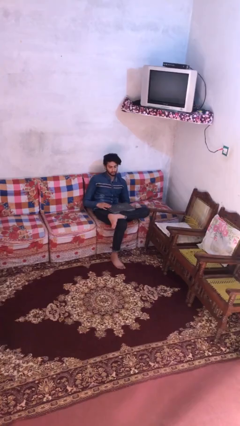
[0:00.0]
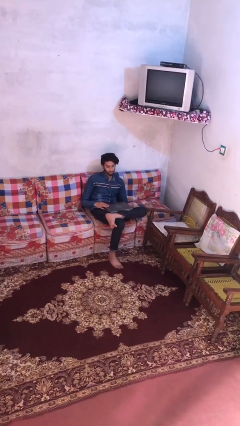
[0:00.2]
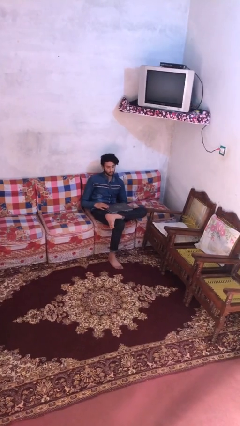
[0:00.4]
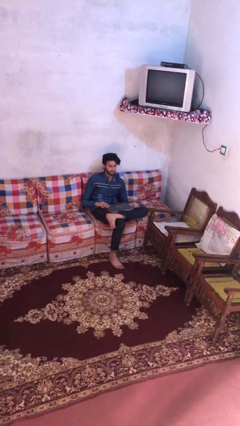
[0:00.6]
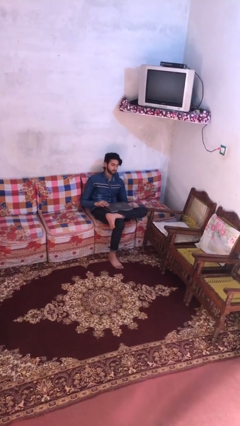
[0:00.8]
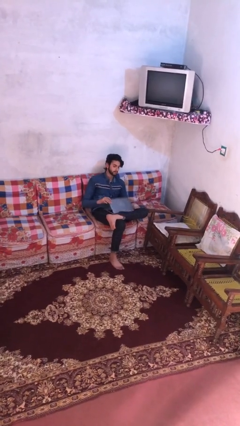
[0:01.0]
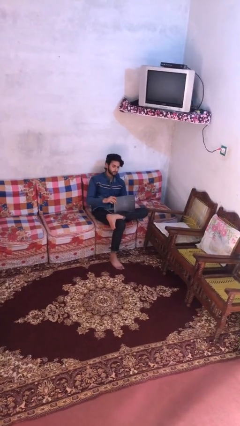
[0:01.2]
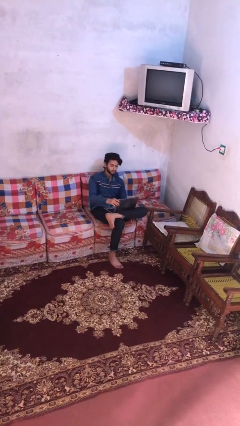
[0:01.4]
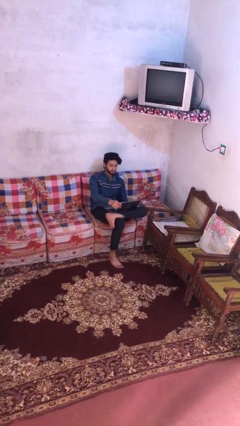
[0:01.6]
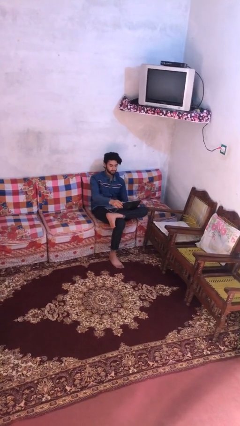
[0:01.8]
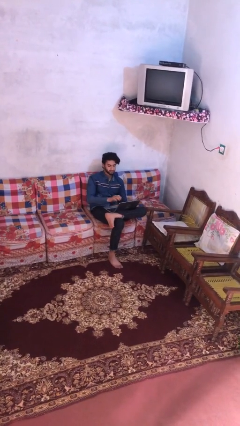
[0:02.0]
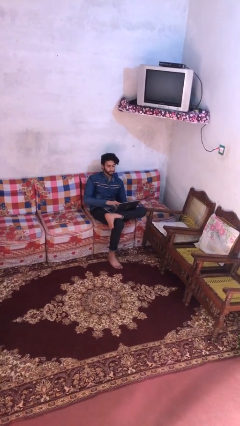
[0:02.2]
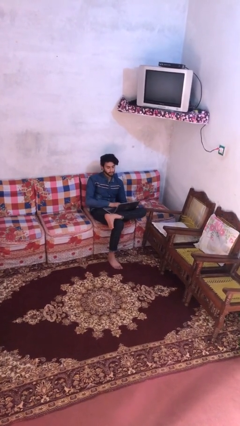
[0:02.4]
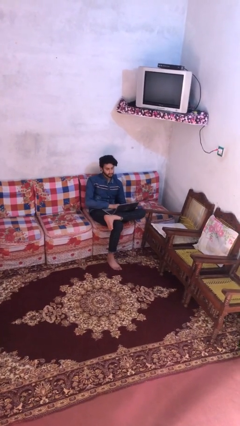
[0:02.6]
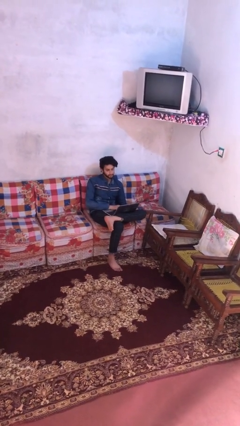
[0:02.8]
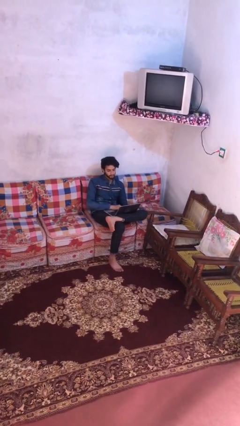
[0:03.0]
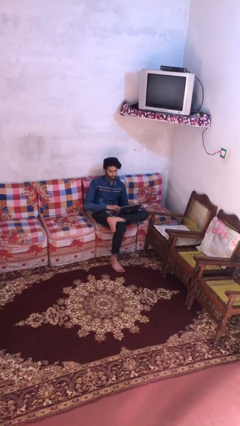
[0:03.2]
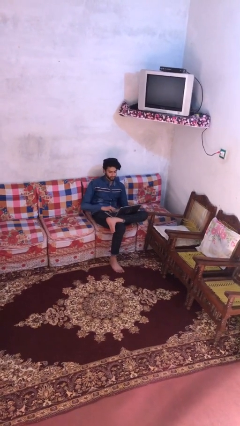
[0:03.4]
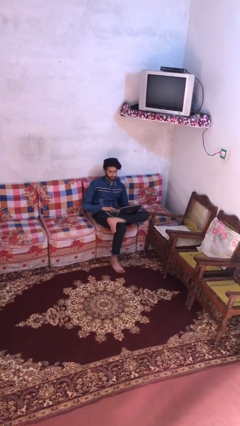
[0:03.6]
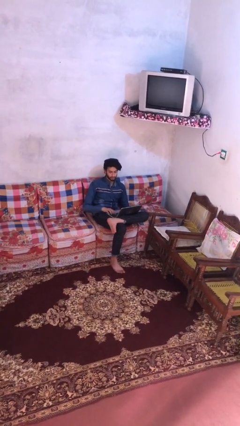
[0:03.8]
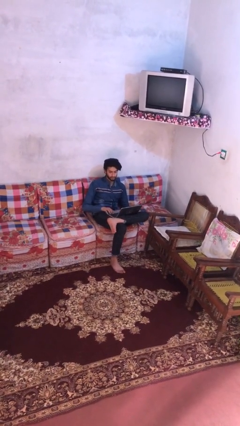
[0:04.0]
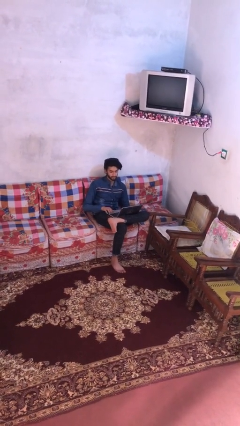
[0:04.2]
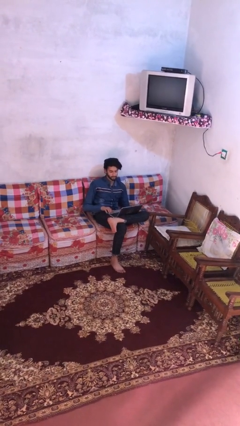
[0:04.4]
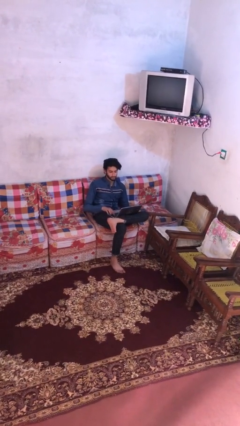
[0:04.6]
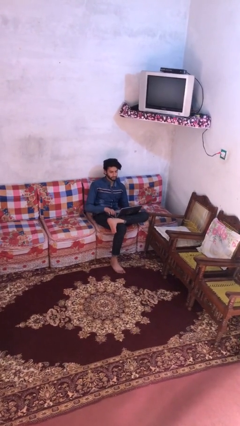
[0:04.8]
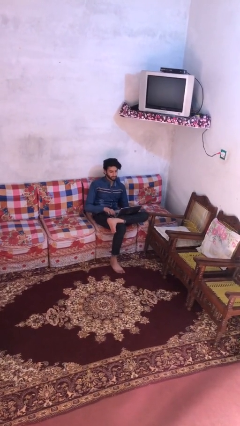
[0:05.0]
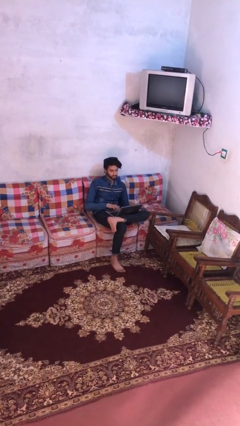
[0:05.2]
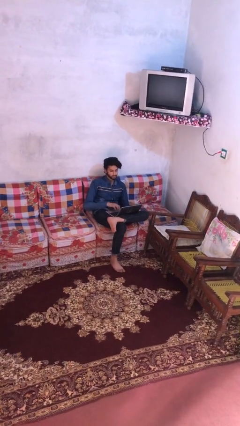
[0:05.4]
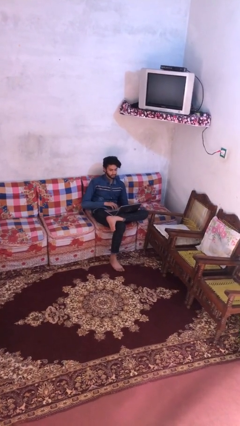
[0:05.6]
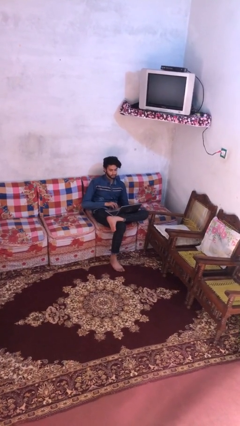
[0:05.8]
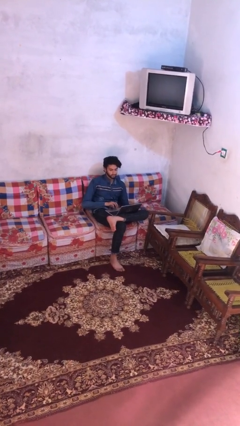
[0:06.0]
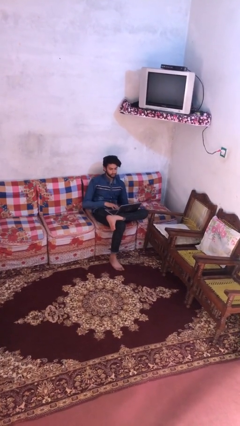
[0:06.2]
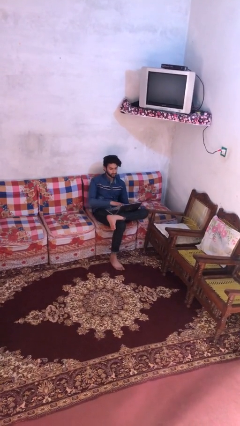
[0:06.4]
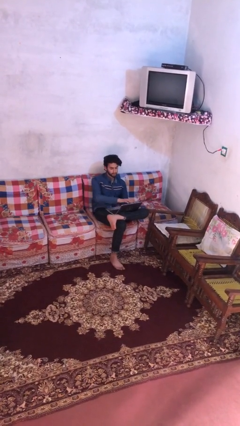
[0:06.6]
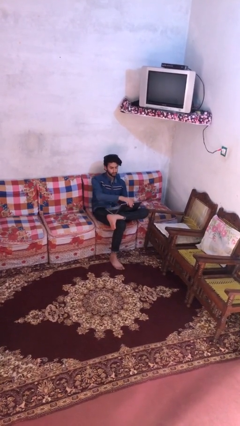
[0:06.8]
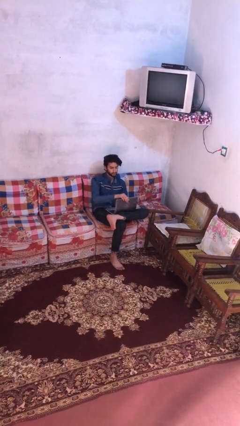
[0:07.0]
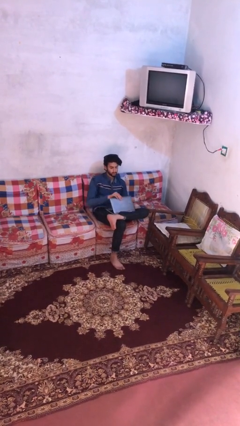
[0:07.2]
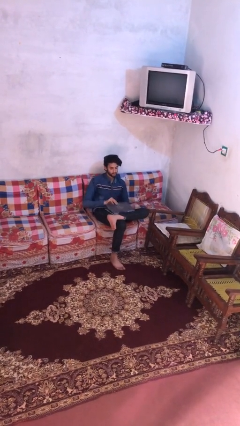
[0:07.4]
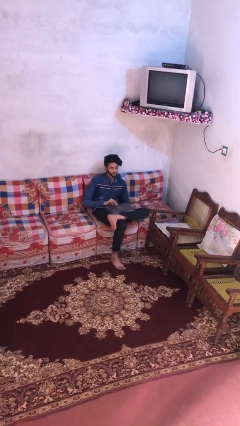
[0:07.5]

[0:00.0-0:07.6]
person interacts with laptop

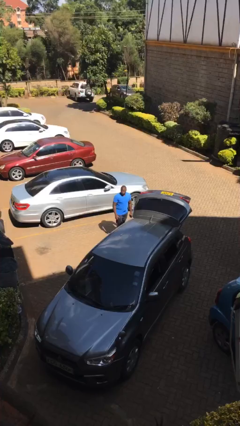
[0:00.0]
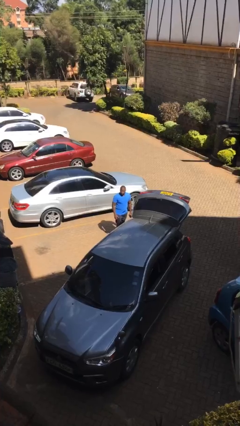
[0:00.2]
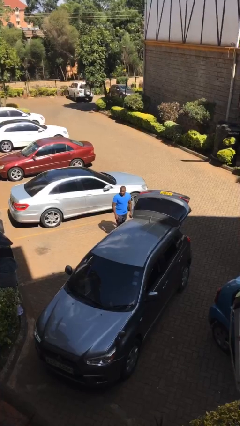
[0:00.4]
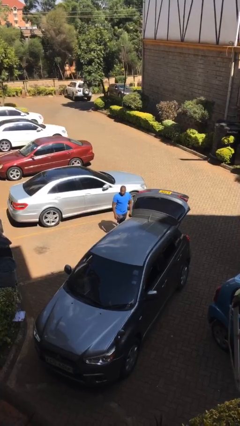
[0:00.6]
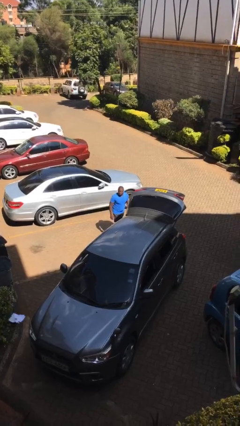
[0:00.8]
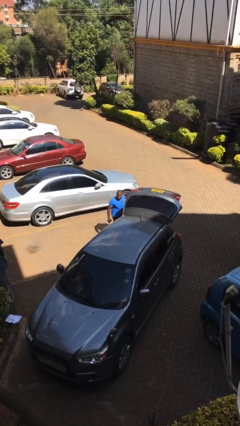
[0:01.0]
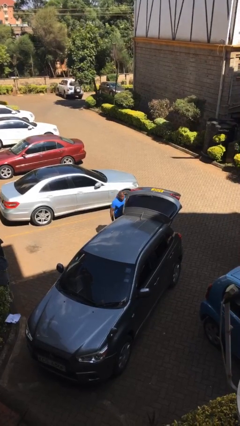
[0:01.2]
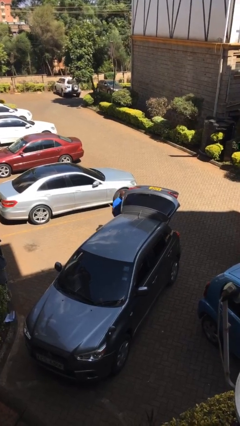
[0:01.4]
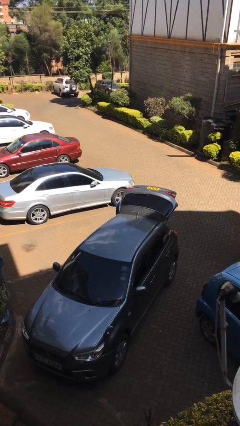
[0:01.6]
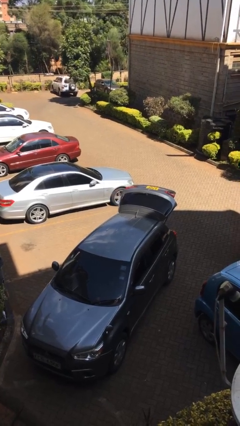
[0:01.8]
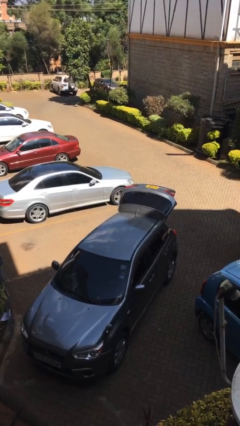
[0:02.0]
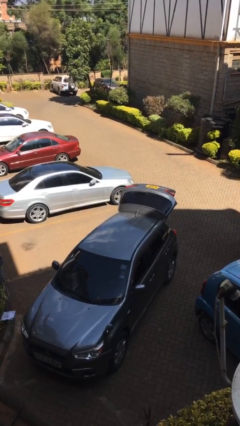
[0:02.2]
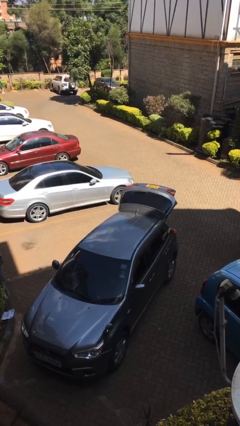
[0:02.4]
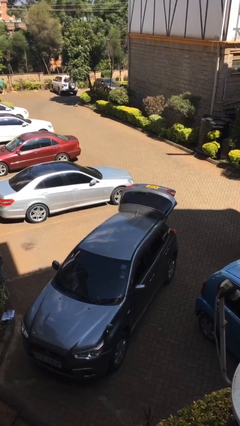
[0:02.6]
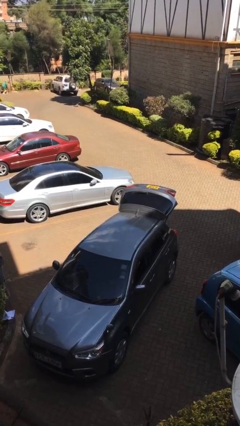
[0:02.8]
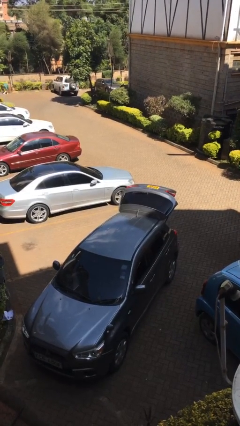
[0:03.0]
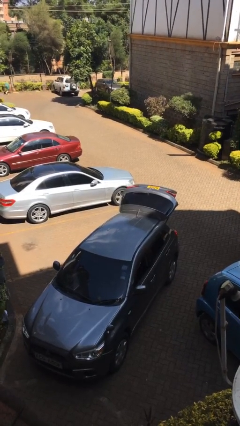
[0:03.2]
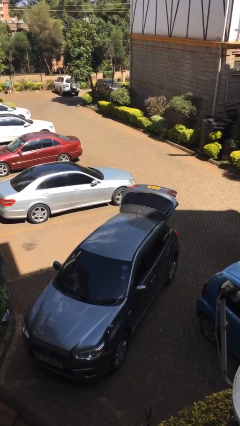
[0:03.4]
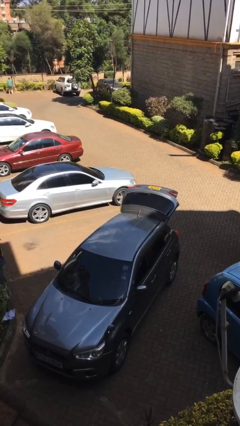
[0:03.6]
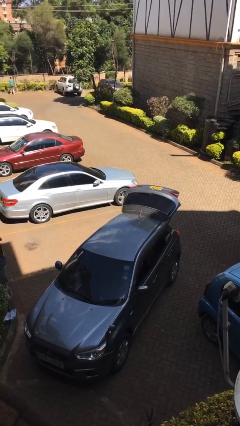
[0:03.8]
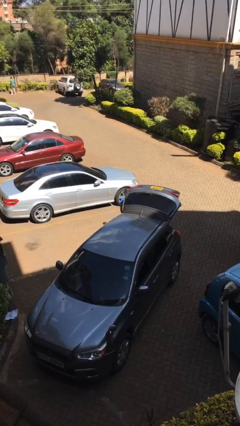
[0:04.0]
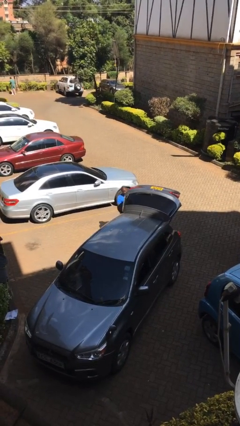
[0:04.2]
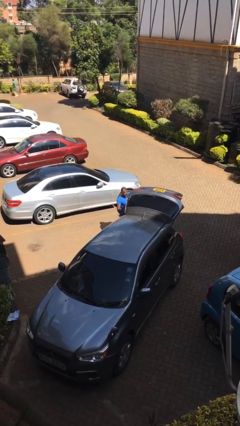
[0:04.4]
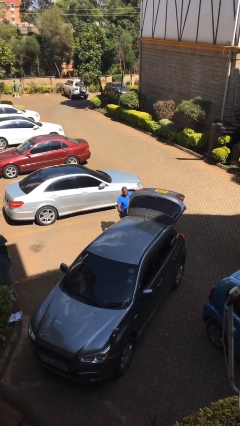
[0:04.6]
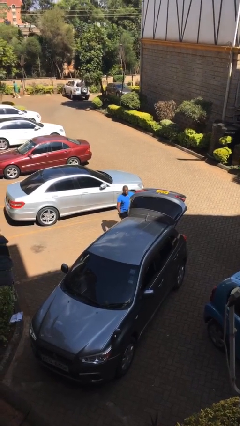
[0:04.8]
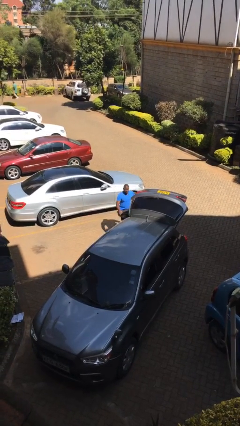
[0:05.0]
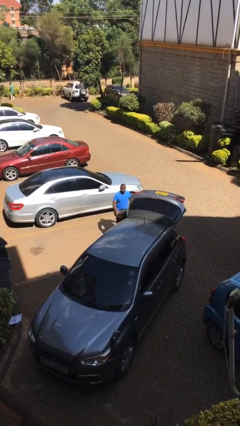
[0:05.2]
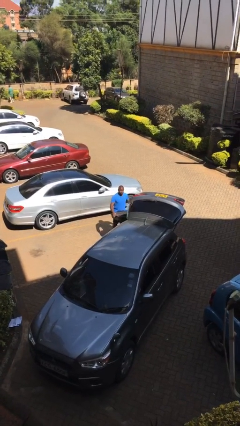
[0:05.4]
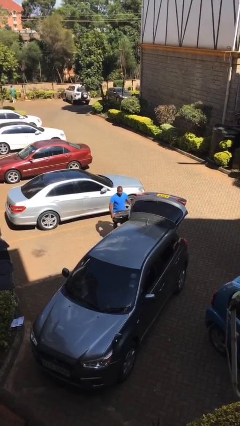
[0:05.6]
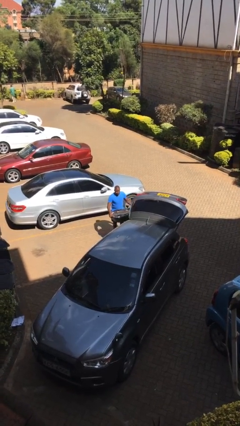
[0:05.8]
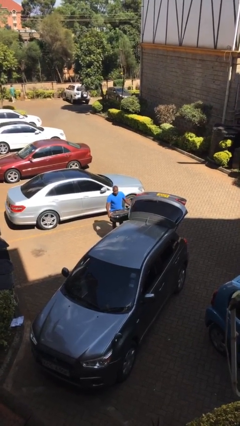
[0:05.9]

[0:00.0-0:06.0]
person unloads car

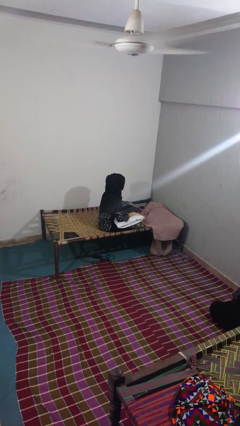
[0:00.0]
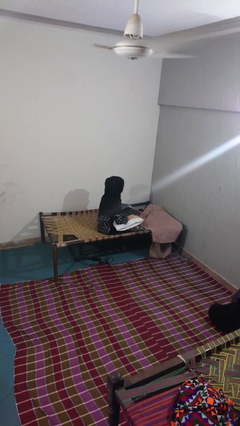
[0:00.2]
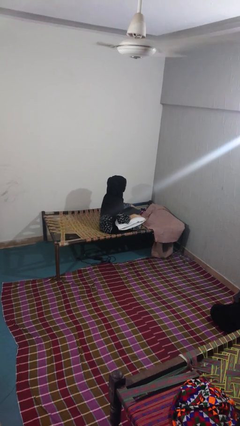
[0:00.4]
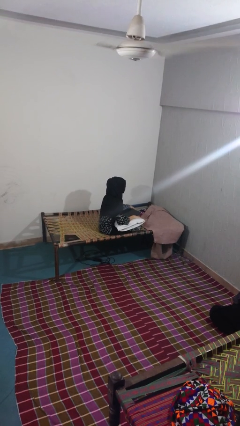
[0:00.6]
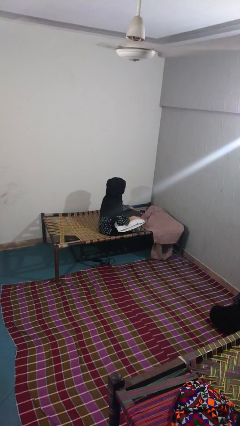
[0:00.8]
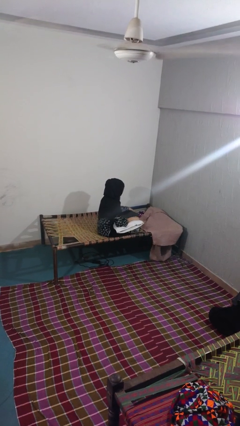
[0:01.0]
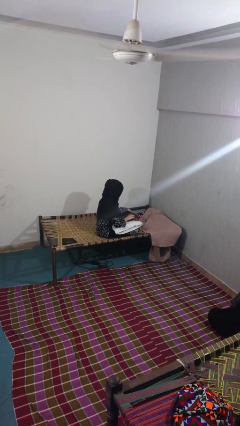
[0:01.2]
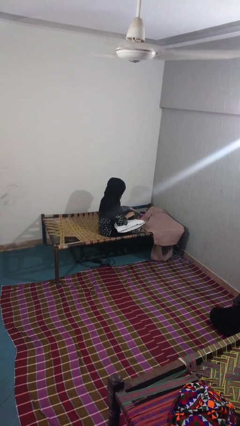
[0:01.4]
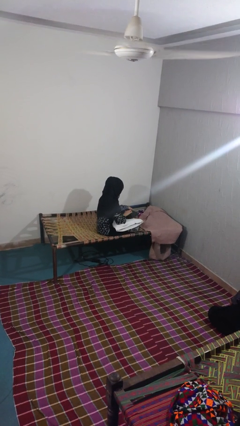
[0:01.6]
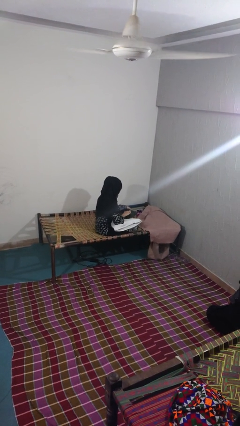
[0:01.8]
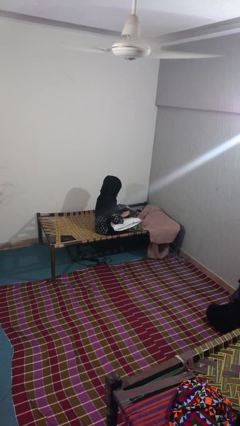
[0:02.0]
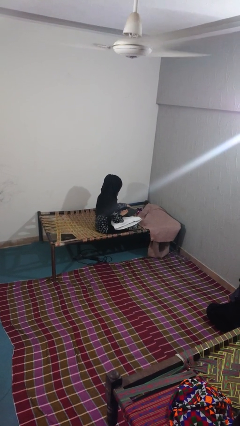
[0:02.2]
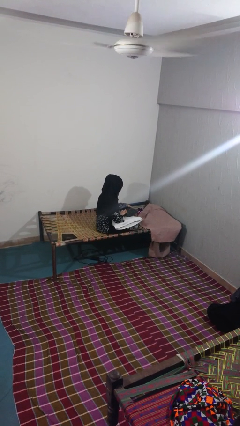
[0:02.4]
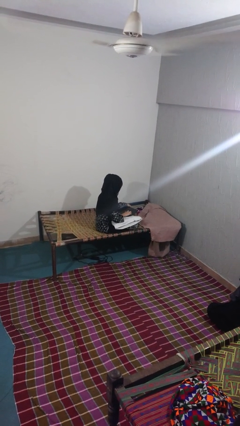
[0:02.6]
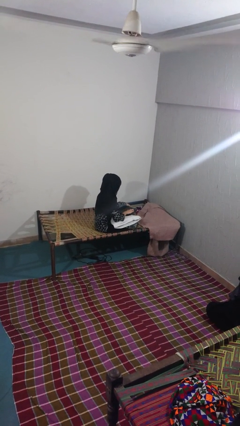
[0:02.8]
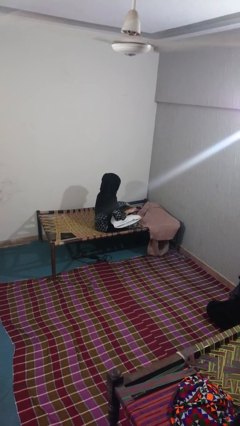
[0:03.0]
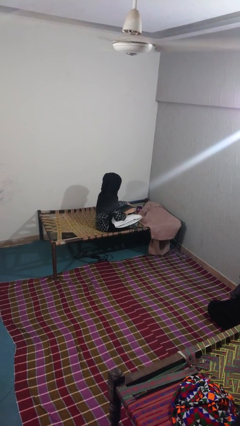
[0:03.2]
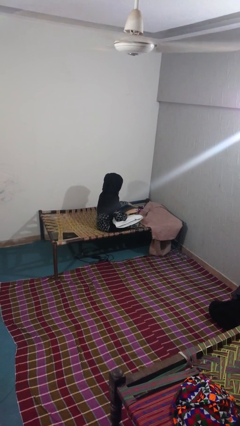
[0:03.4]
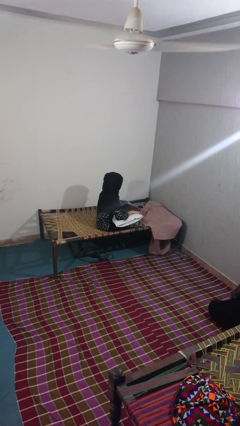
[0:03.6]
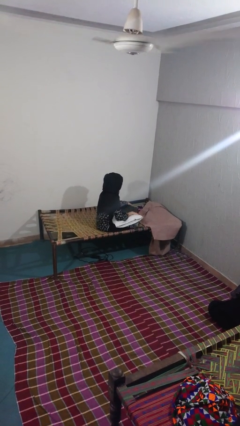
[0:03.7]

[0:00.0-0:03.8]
person interacts with tablet

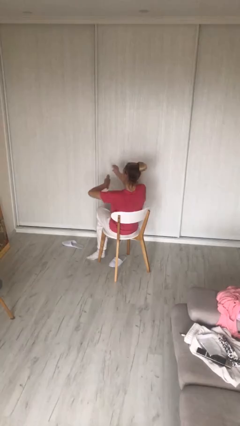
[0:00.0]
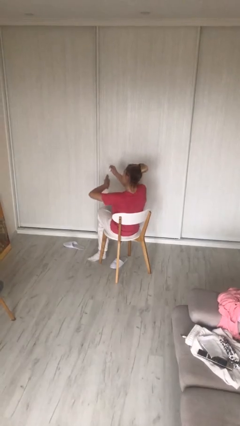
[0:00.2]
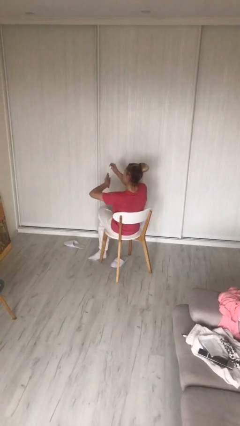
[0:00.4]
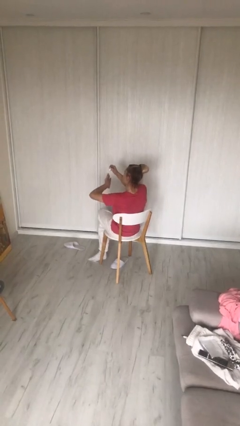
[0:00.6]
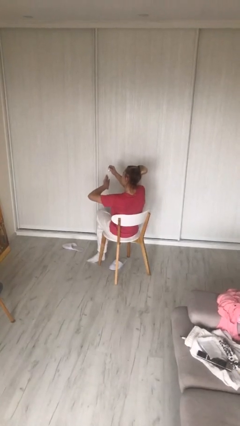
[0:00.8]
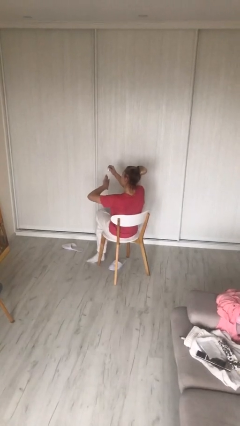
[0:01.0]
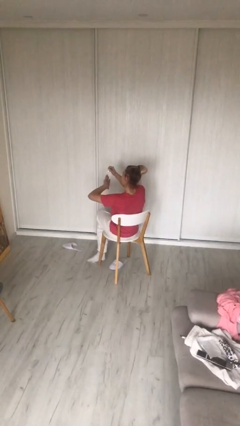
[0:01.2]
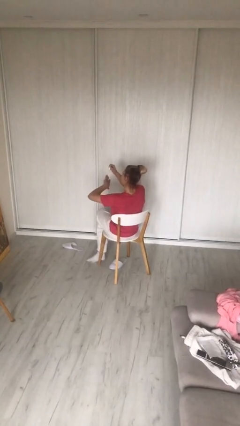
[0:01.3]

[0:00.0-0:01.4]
person paints fingernails
